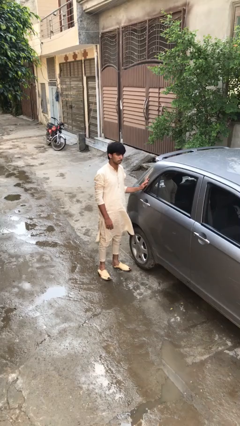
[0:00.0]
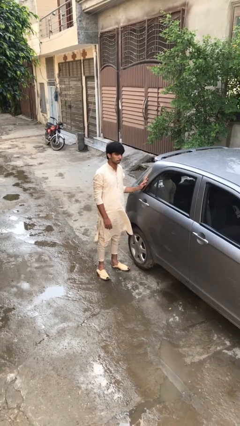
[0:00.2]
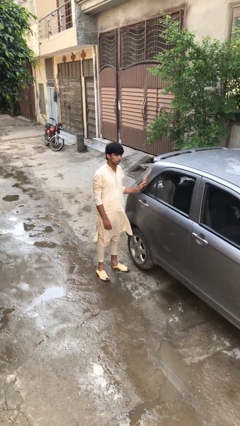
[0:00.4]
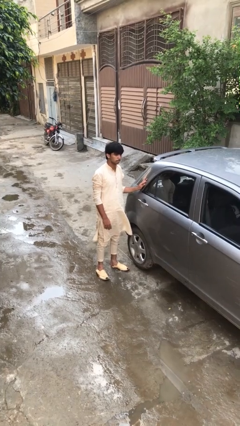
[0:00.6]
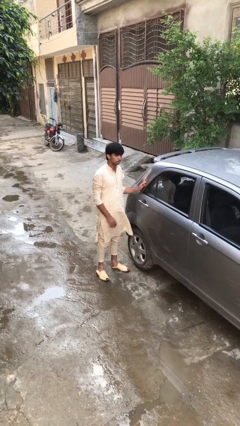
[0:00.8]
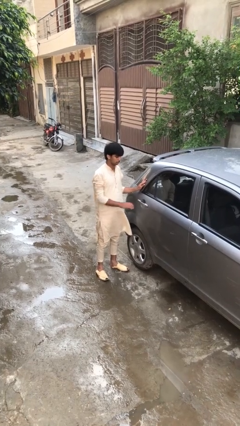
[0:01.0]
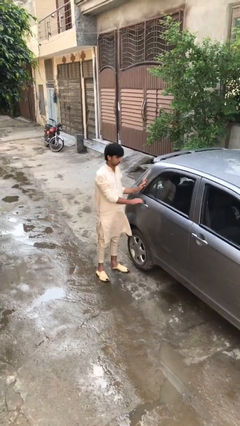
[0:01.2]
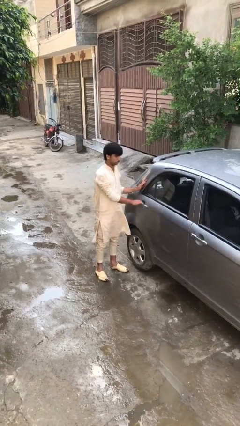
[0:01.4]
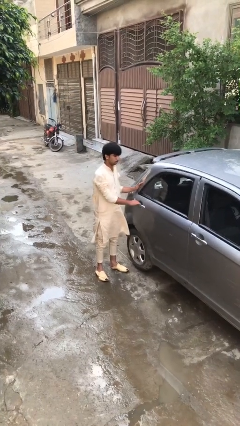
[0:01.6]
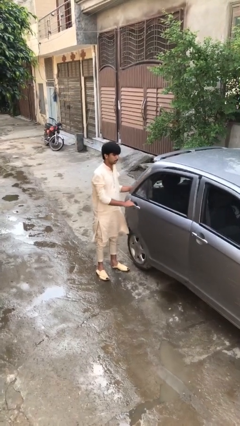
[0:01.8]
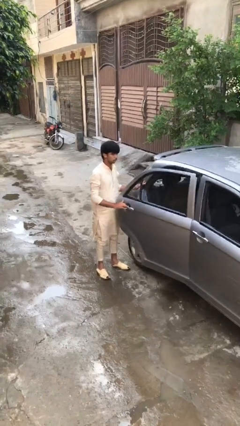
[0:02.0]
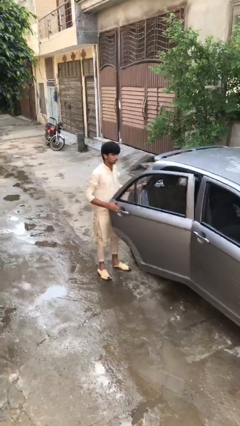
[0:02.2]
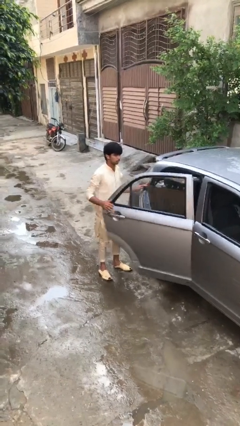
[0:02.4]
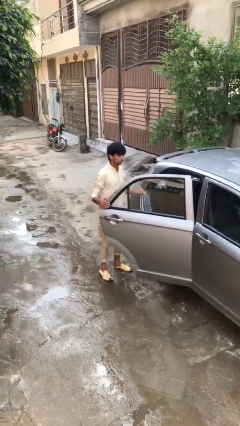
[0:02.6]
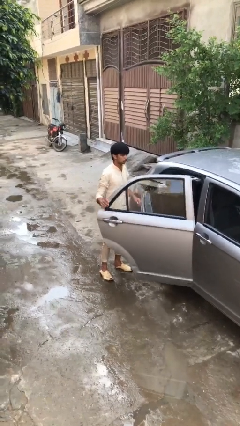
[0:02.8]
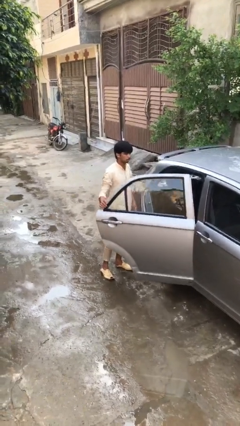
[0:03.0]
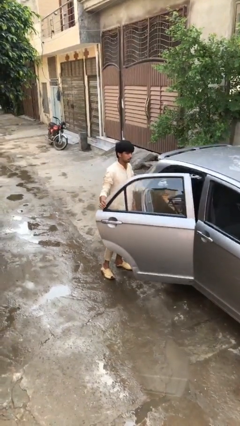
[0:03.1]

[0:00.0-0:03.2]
person opens car door

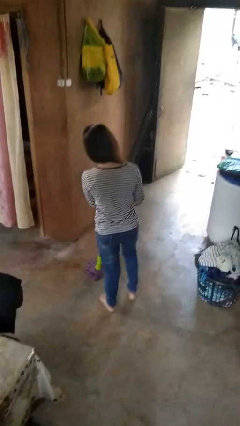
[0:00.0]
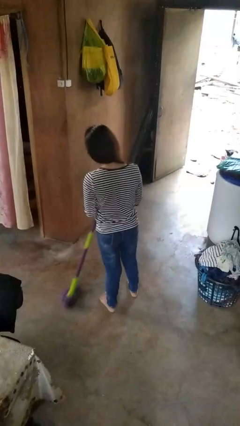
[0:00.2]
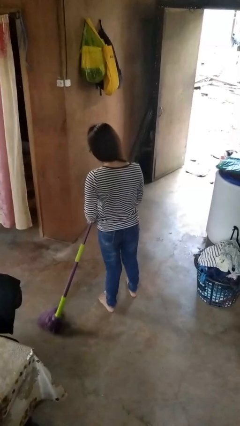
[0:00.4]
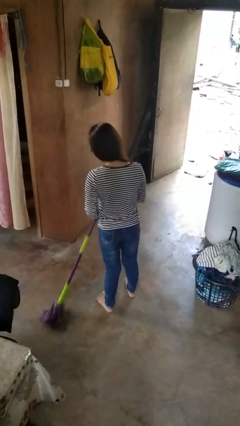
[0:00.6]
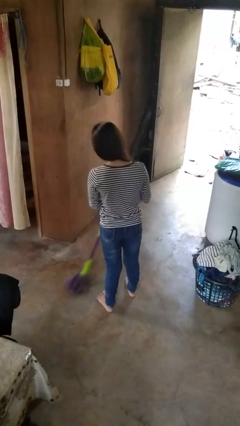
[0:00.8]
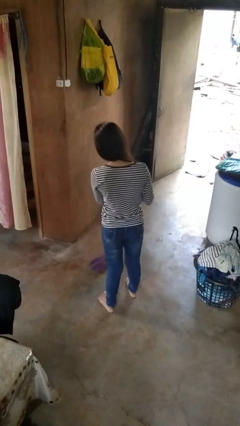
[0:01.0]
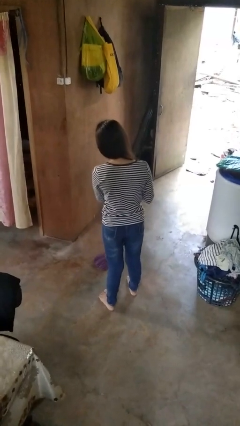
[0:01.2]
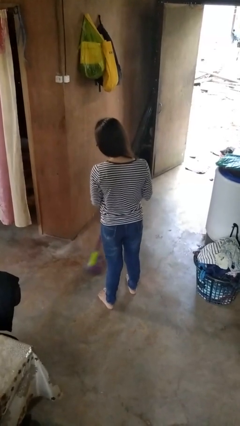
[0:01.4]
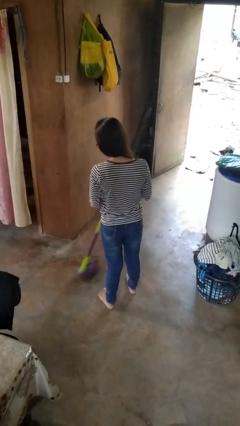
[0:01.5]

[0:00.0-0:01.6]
person mops

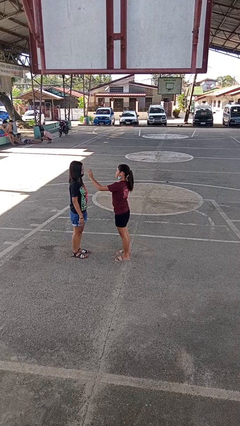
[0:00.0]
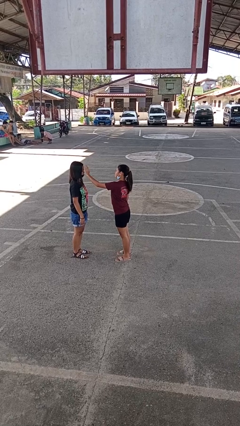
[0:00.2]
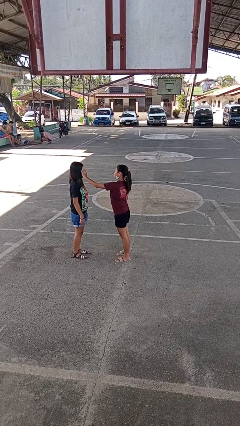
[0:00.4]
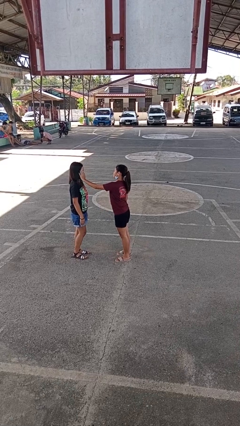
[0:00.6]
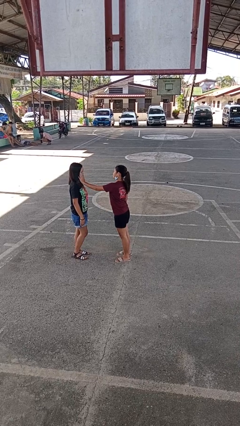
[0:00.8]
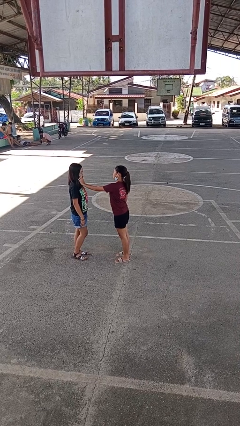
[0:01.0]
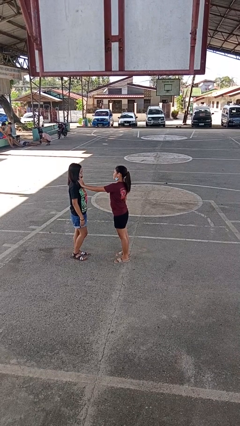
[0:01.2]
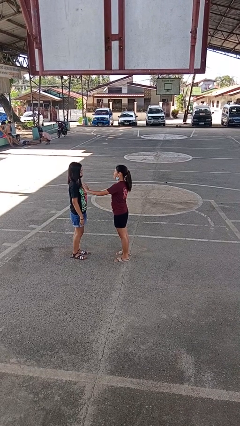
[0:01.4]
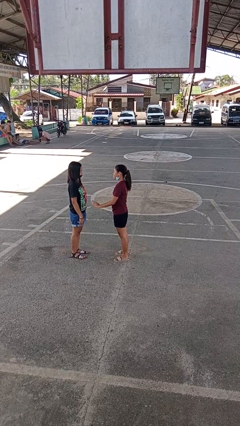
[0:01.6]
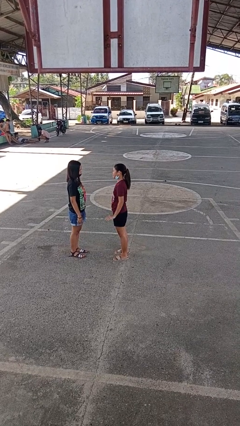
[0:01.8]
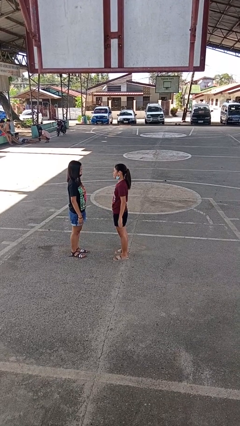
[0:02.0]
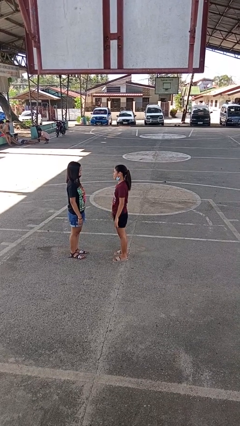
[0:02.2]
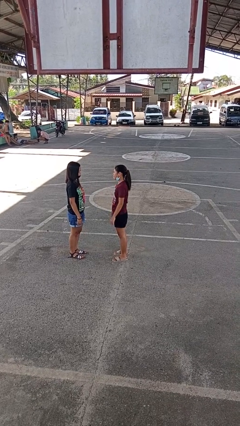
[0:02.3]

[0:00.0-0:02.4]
person touches face of person

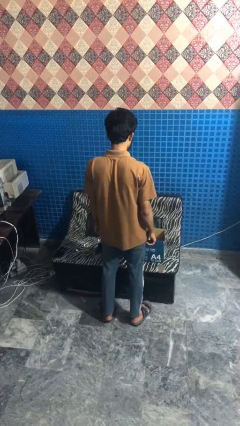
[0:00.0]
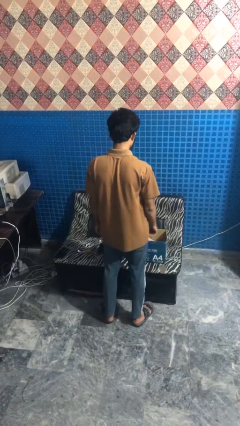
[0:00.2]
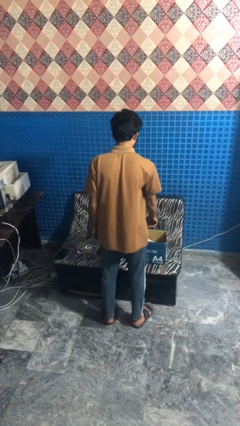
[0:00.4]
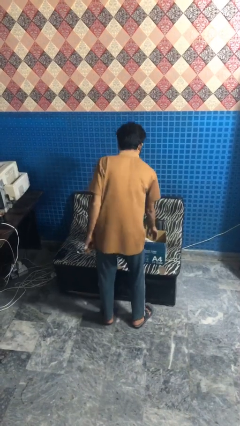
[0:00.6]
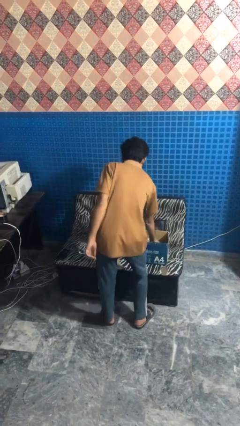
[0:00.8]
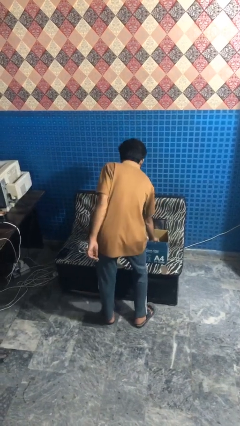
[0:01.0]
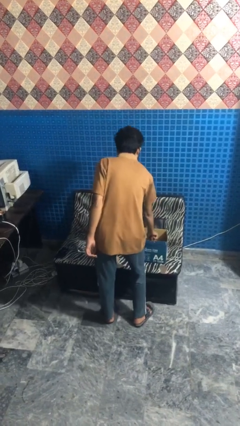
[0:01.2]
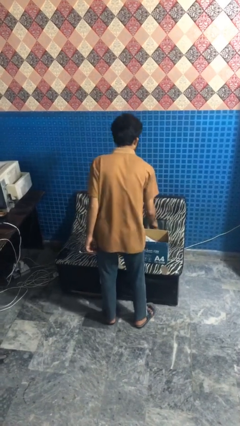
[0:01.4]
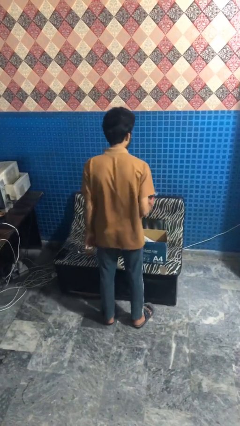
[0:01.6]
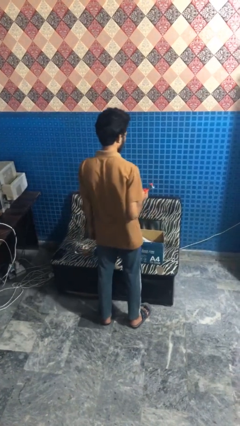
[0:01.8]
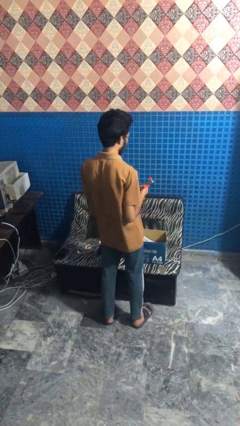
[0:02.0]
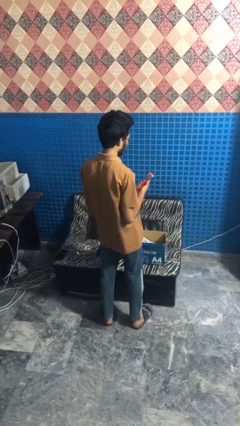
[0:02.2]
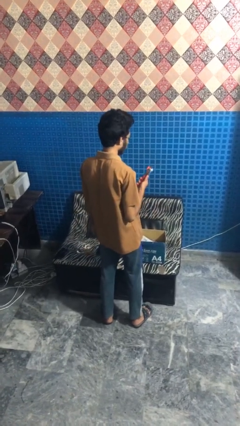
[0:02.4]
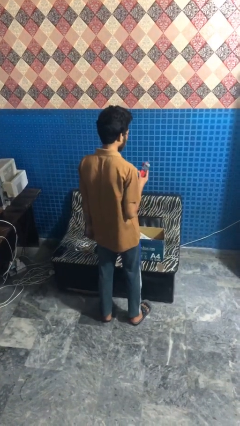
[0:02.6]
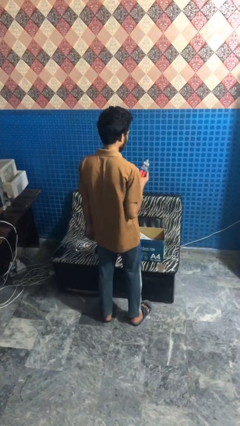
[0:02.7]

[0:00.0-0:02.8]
person takes object from box

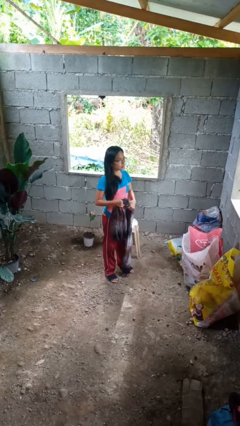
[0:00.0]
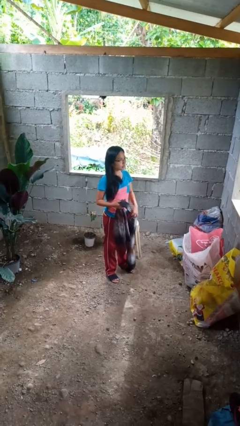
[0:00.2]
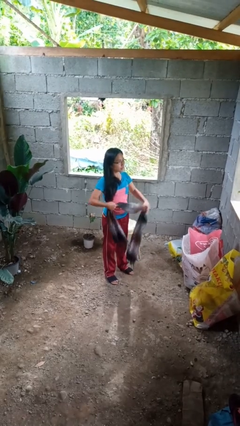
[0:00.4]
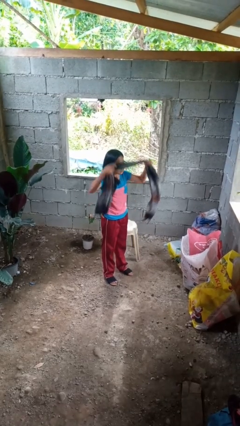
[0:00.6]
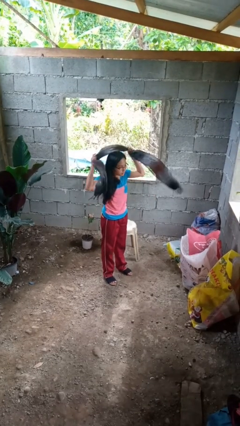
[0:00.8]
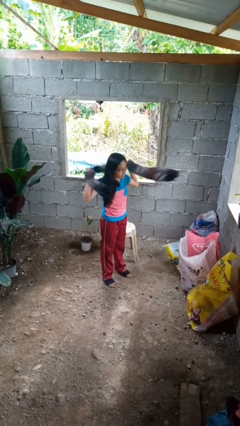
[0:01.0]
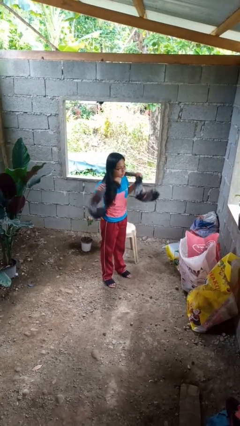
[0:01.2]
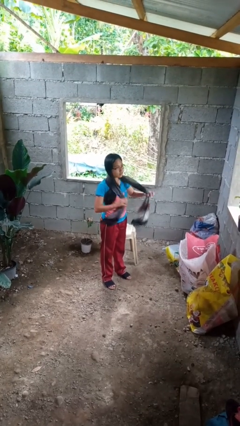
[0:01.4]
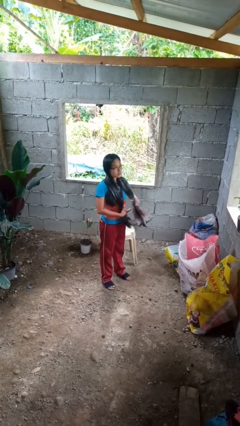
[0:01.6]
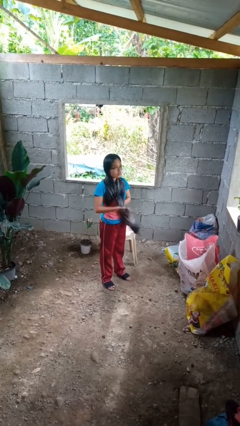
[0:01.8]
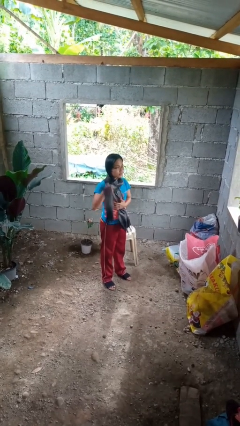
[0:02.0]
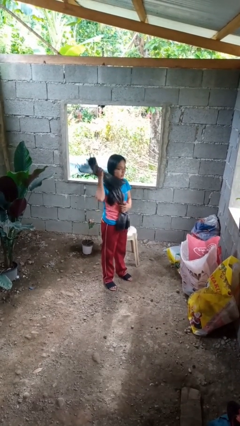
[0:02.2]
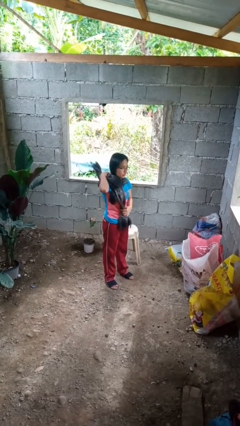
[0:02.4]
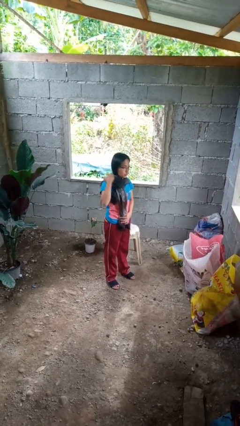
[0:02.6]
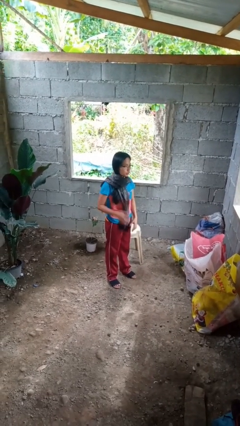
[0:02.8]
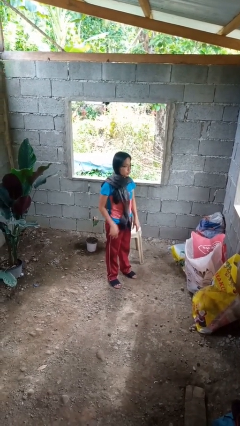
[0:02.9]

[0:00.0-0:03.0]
person puts on scarf

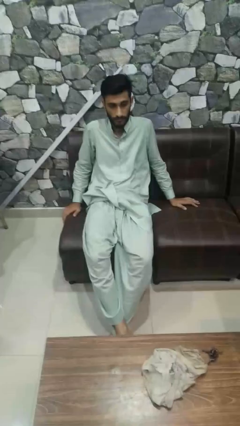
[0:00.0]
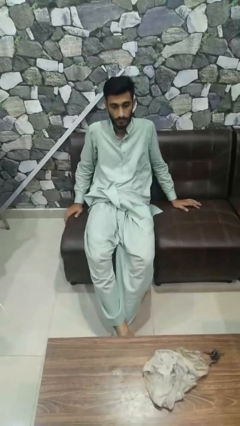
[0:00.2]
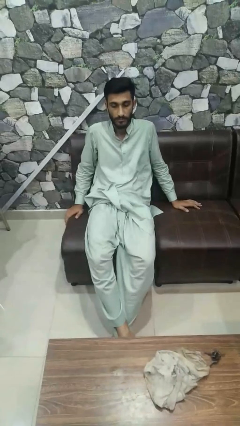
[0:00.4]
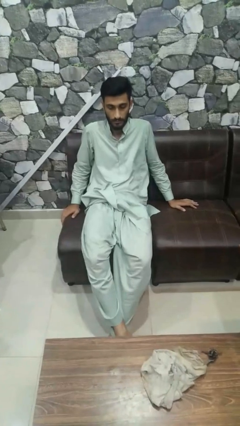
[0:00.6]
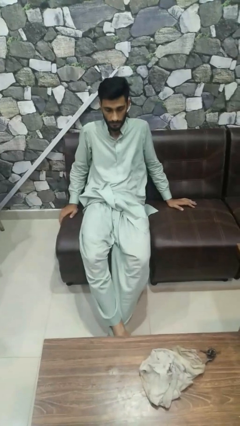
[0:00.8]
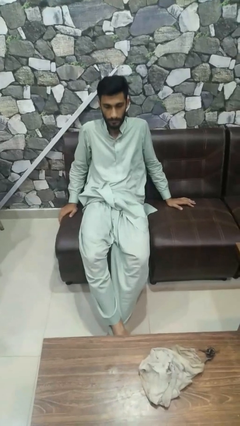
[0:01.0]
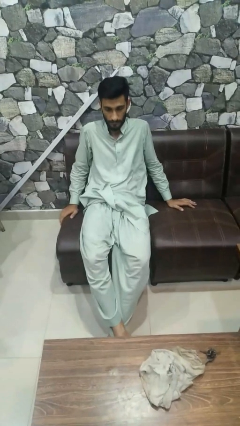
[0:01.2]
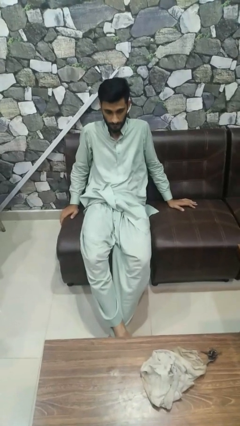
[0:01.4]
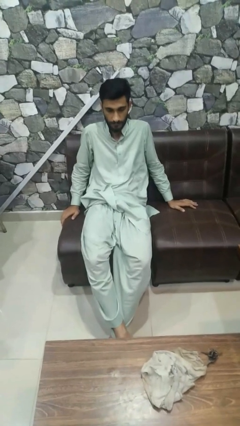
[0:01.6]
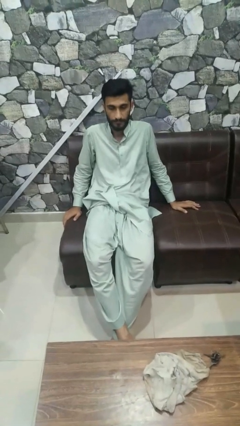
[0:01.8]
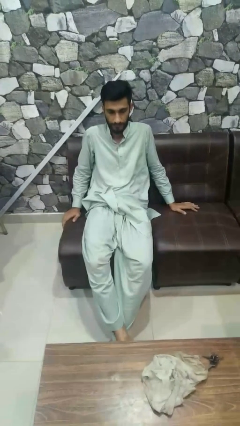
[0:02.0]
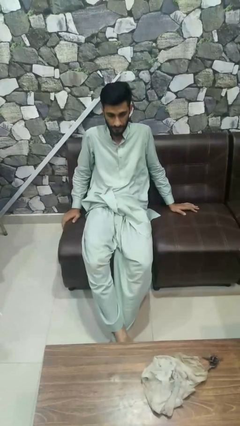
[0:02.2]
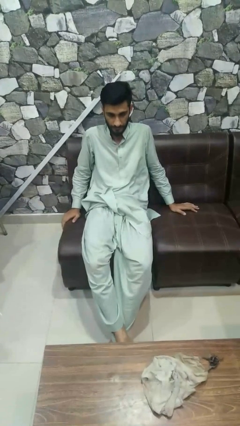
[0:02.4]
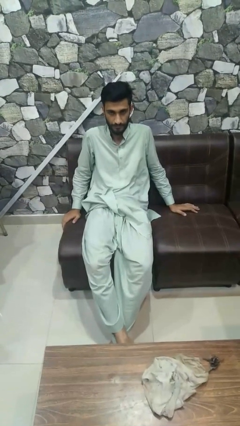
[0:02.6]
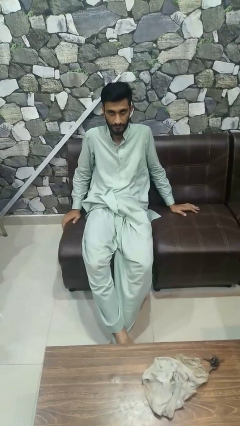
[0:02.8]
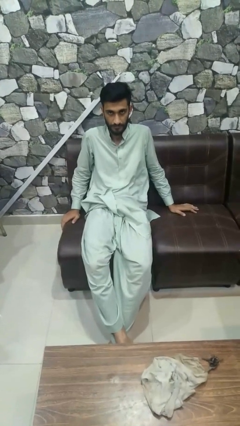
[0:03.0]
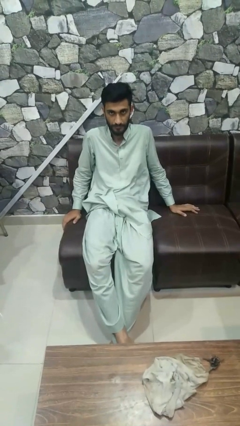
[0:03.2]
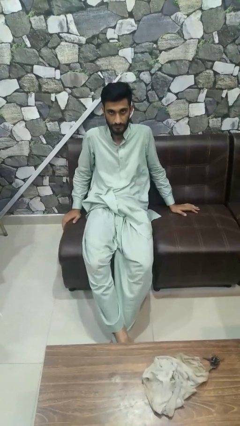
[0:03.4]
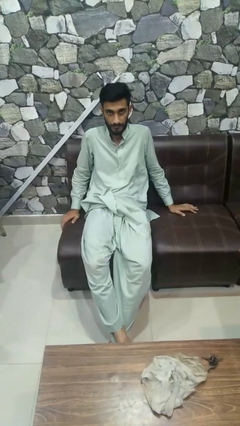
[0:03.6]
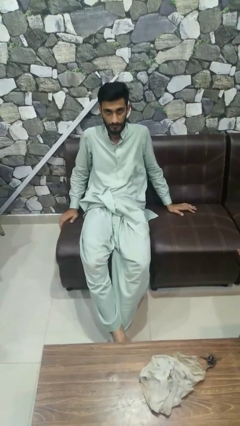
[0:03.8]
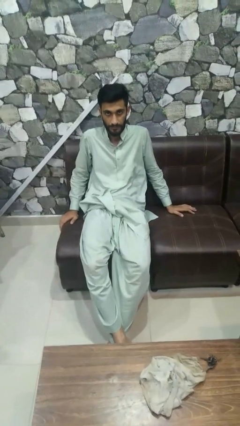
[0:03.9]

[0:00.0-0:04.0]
person nods head
